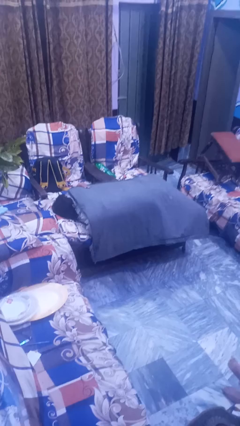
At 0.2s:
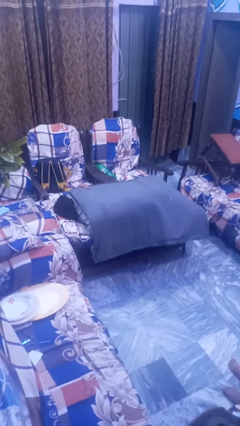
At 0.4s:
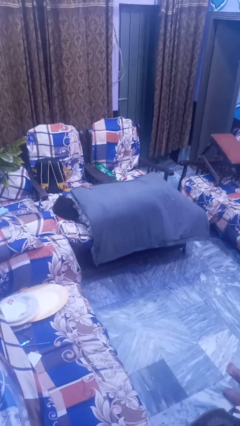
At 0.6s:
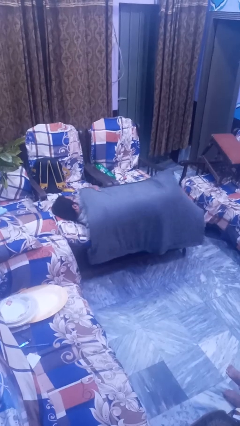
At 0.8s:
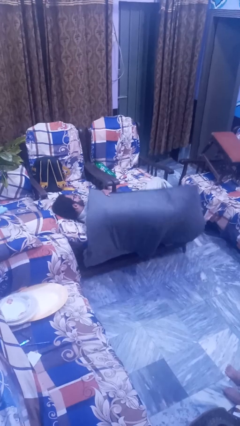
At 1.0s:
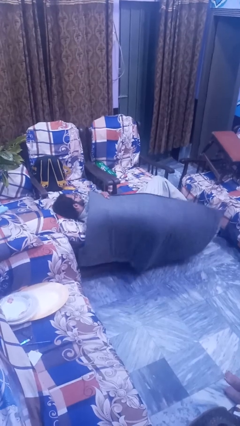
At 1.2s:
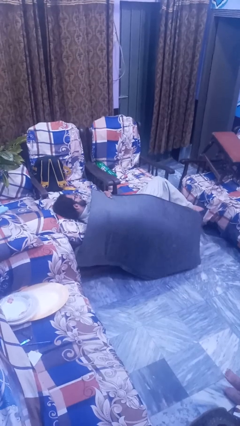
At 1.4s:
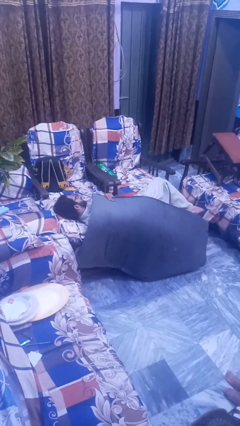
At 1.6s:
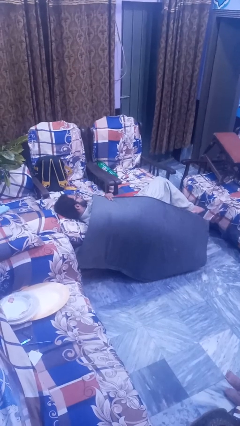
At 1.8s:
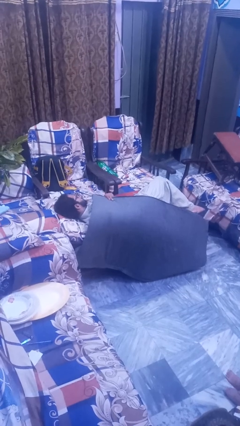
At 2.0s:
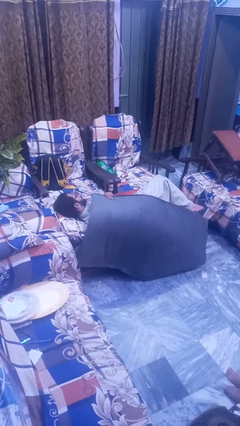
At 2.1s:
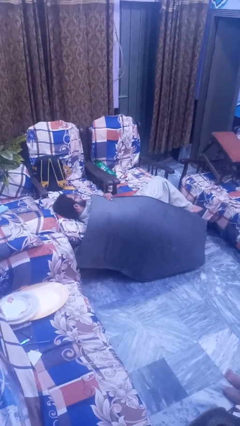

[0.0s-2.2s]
person uncovers with blanket

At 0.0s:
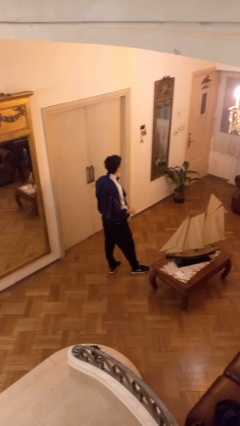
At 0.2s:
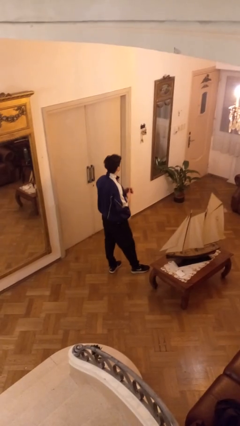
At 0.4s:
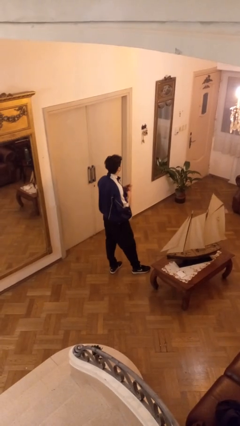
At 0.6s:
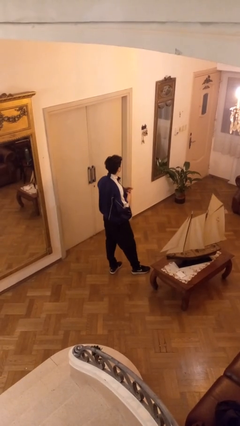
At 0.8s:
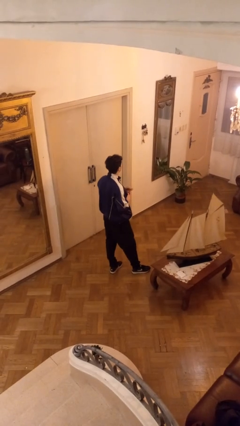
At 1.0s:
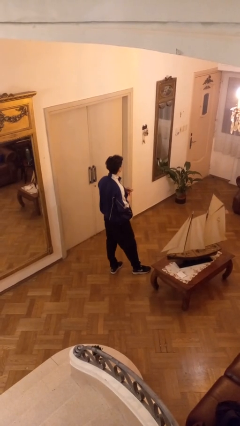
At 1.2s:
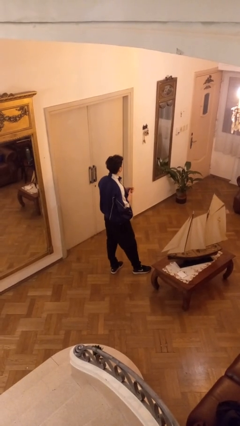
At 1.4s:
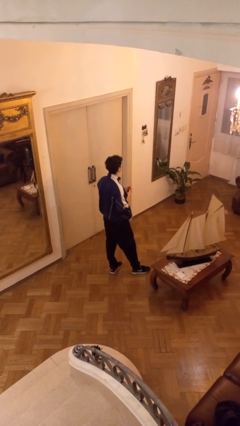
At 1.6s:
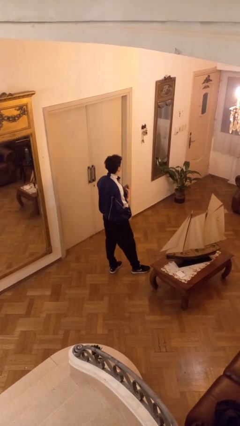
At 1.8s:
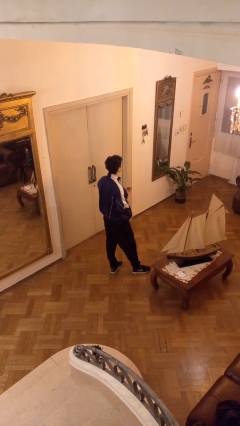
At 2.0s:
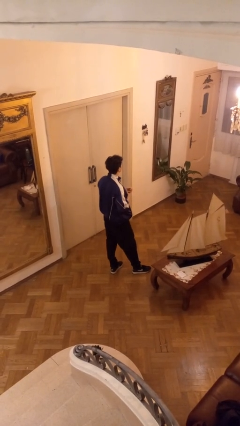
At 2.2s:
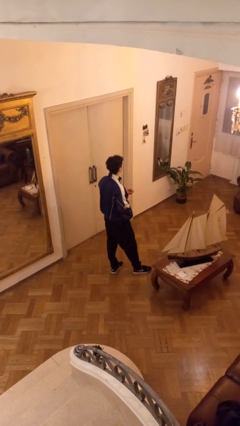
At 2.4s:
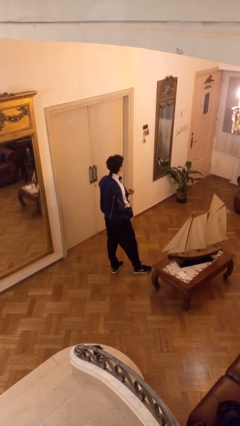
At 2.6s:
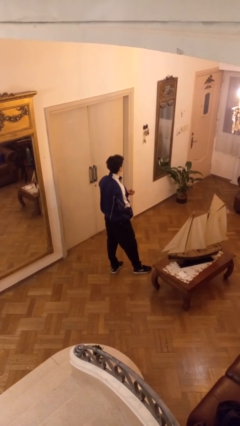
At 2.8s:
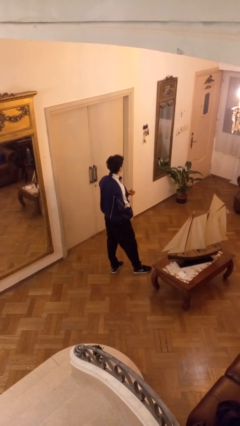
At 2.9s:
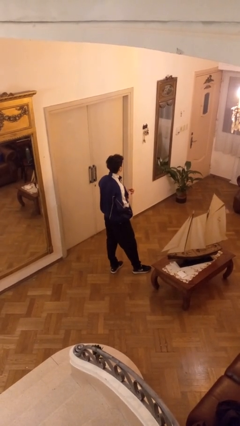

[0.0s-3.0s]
person cracks knuckles

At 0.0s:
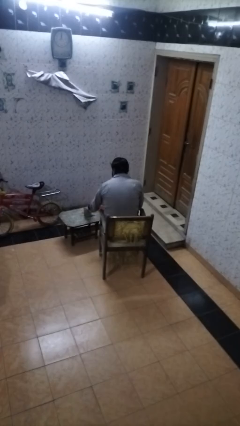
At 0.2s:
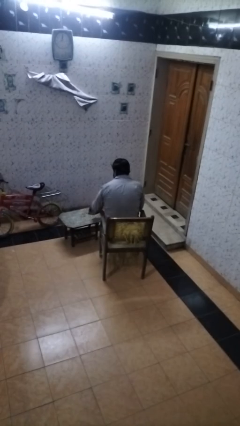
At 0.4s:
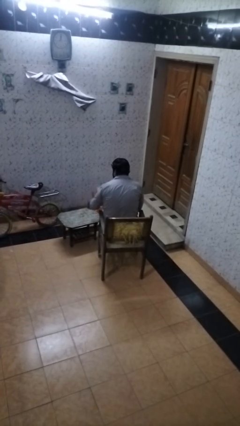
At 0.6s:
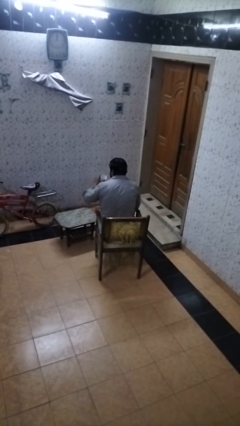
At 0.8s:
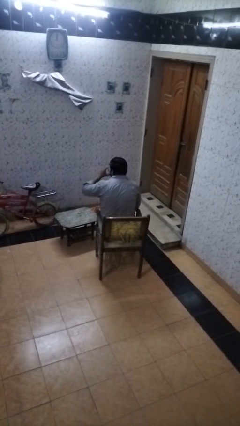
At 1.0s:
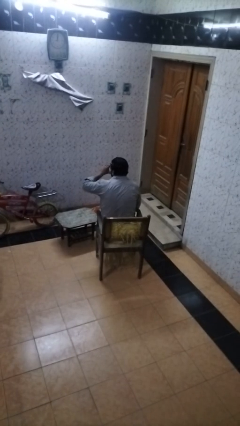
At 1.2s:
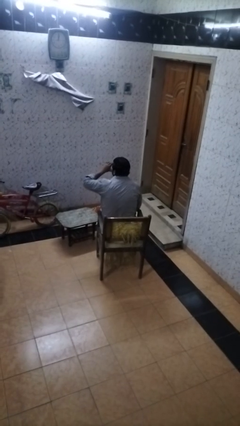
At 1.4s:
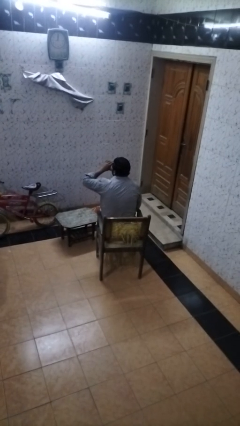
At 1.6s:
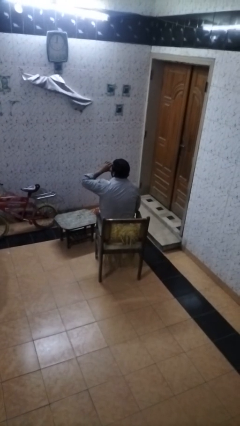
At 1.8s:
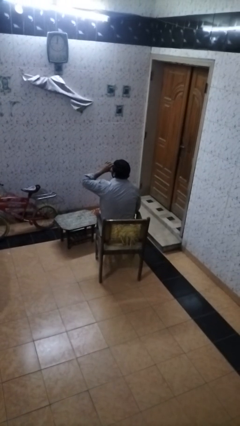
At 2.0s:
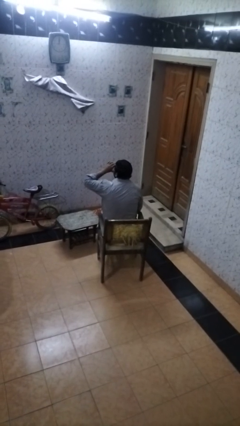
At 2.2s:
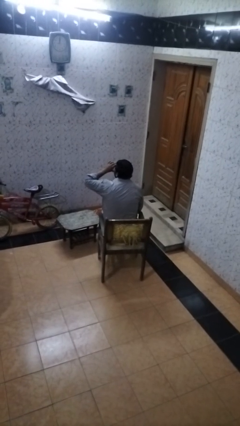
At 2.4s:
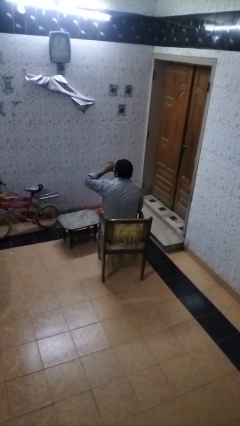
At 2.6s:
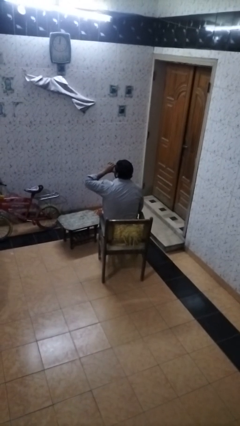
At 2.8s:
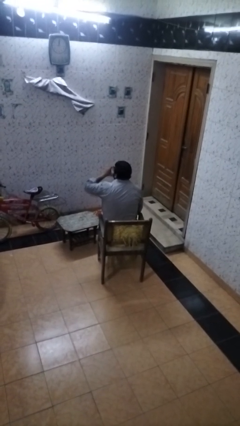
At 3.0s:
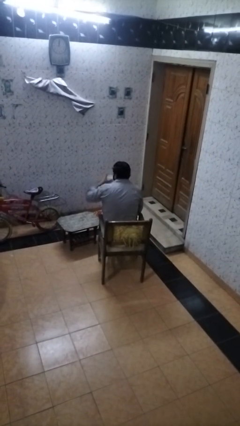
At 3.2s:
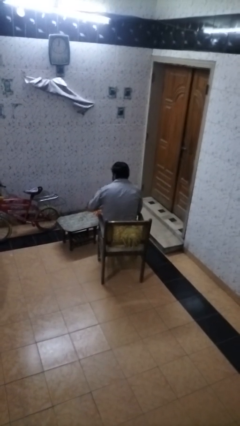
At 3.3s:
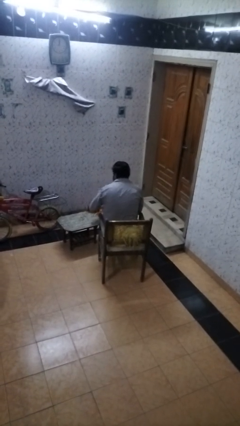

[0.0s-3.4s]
person drinks from cup

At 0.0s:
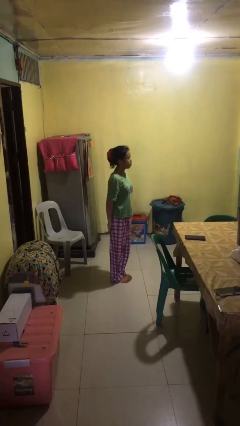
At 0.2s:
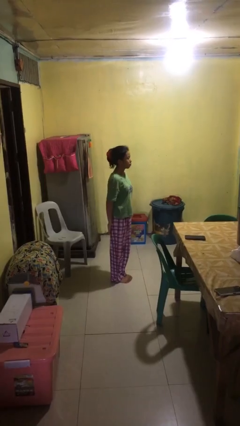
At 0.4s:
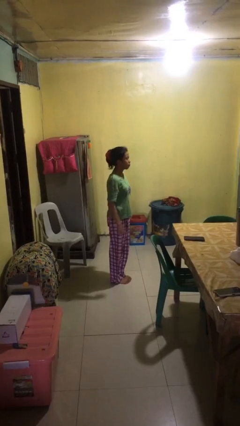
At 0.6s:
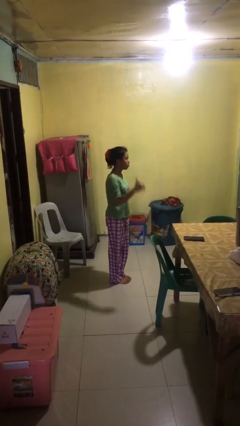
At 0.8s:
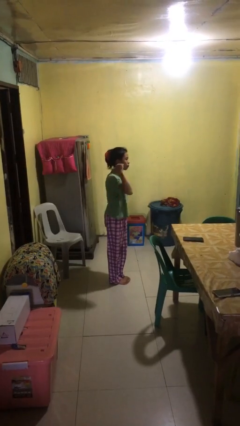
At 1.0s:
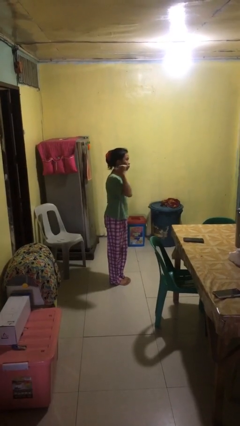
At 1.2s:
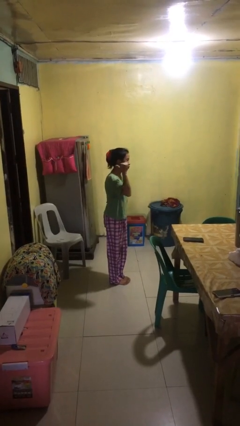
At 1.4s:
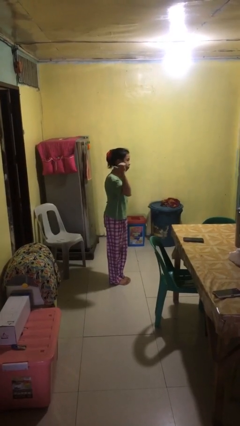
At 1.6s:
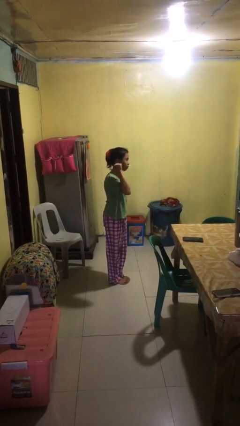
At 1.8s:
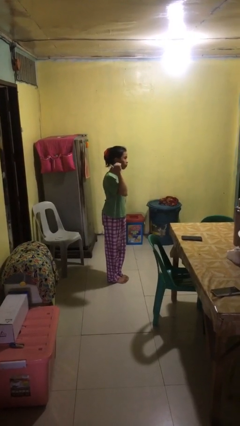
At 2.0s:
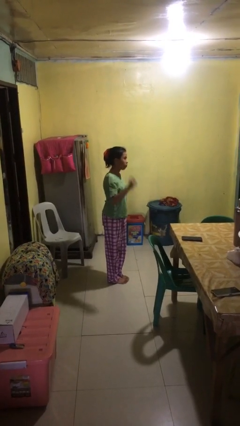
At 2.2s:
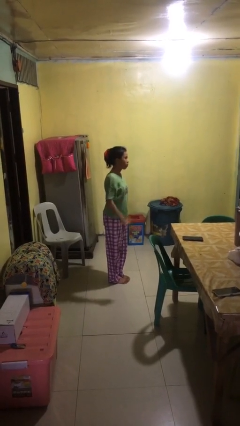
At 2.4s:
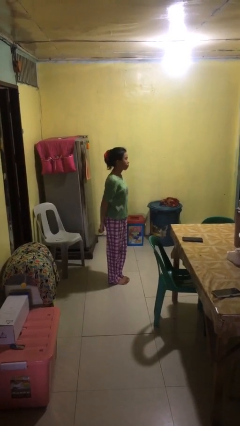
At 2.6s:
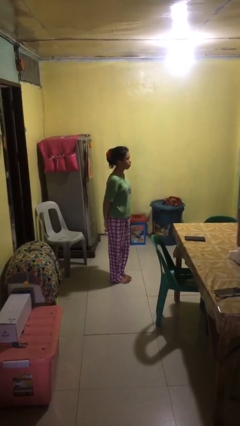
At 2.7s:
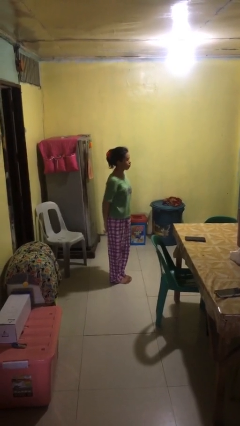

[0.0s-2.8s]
person gestures behind me

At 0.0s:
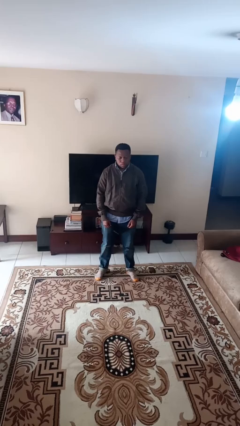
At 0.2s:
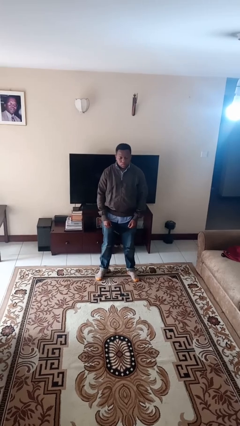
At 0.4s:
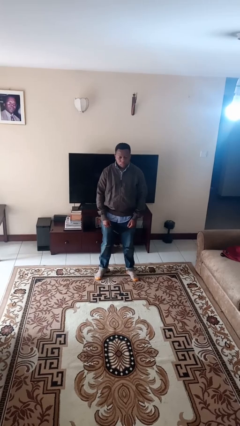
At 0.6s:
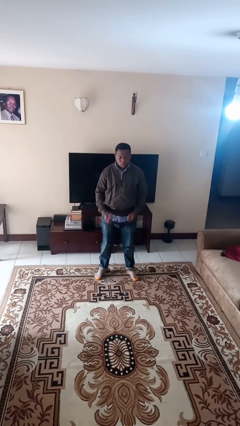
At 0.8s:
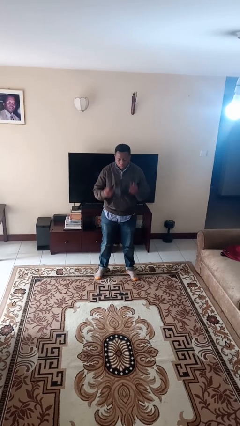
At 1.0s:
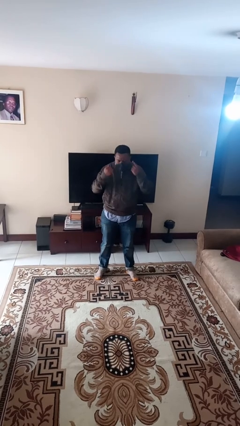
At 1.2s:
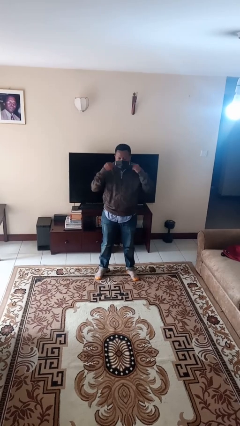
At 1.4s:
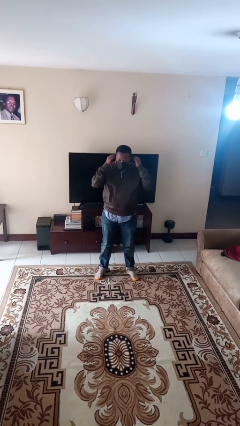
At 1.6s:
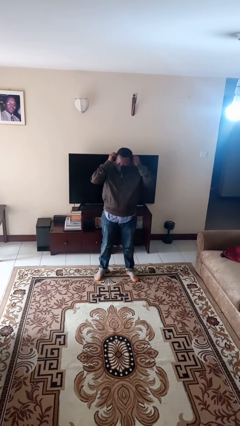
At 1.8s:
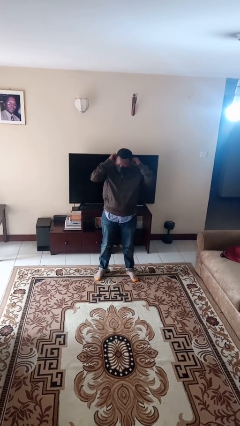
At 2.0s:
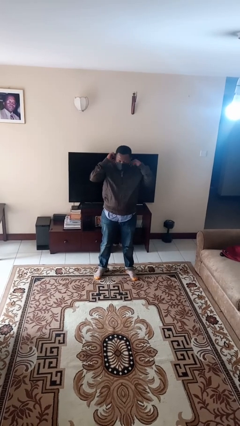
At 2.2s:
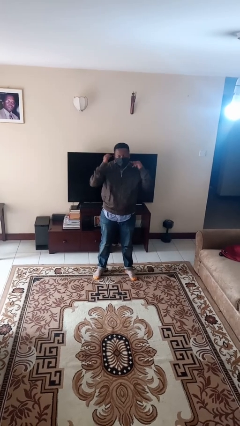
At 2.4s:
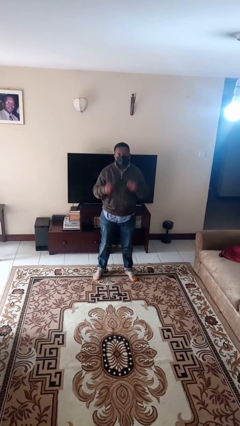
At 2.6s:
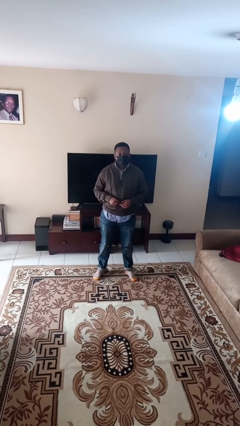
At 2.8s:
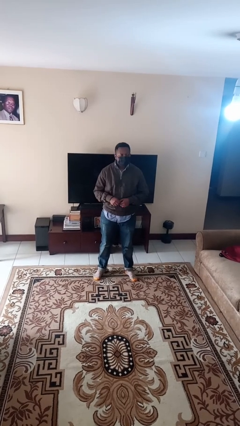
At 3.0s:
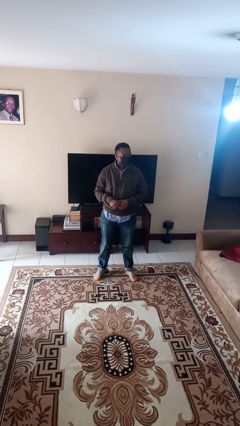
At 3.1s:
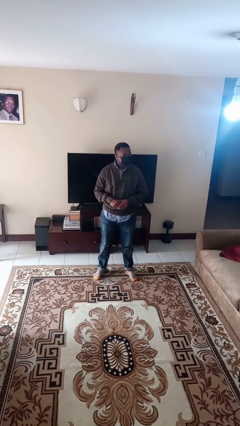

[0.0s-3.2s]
person puts on facemask

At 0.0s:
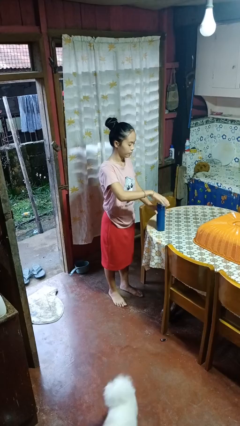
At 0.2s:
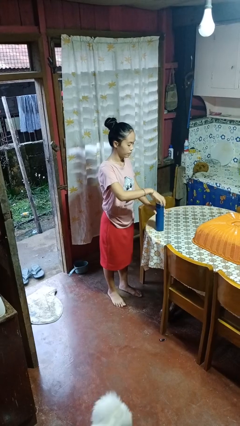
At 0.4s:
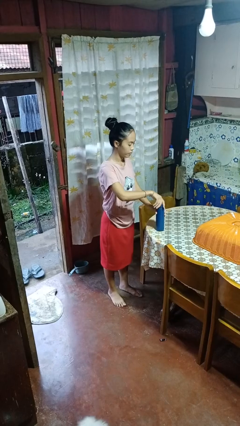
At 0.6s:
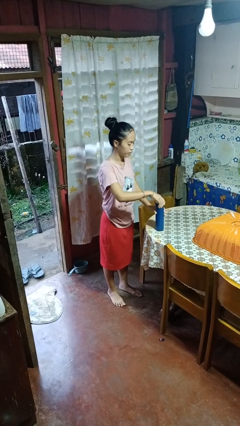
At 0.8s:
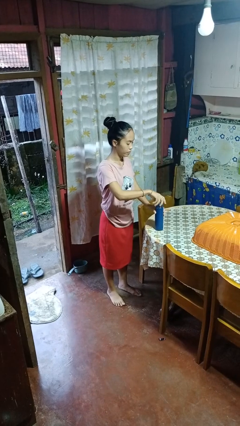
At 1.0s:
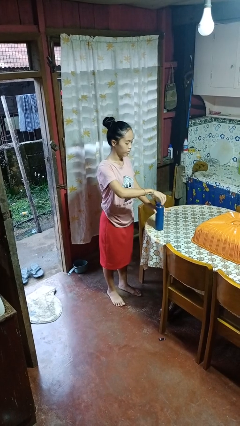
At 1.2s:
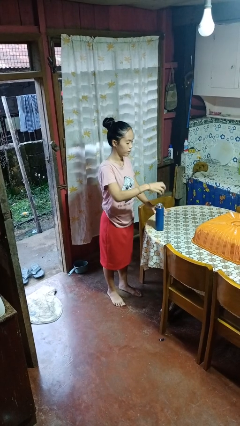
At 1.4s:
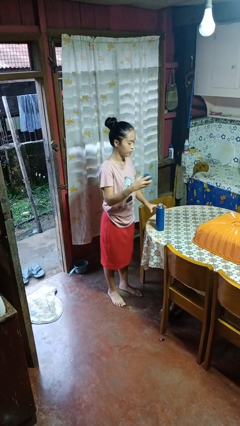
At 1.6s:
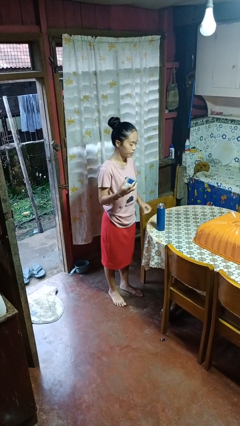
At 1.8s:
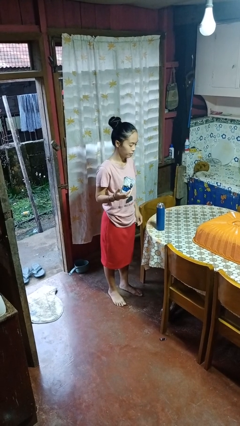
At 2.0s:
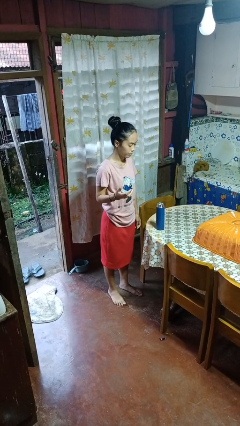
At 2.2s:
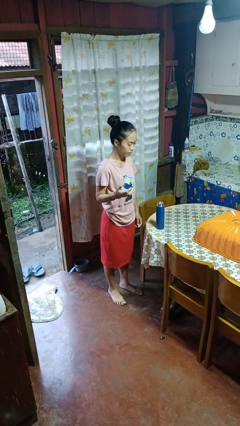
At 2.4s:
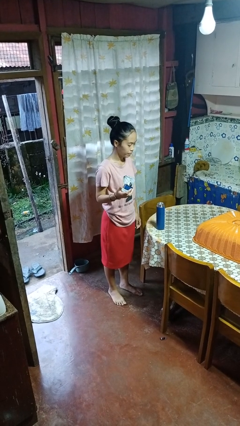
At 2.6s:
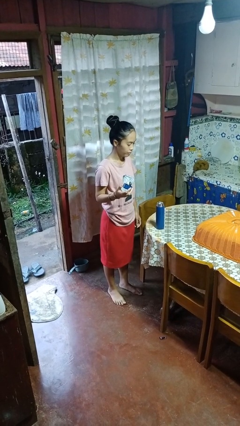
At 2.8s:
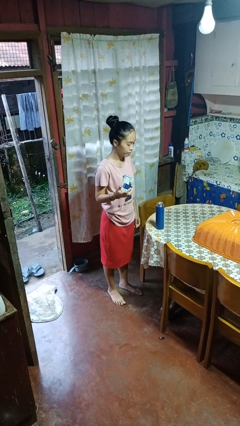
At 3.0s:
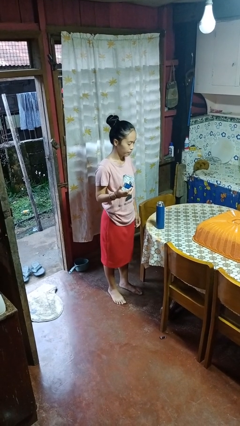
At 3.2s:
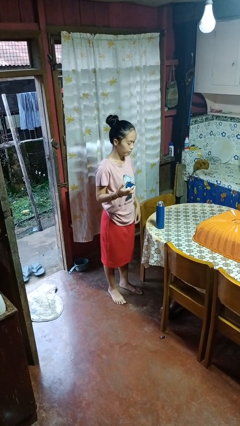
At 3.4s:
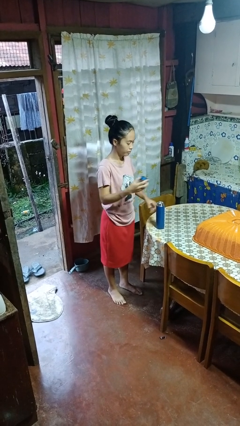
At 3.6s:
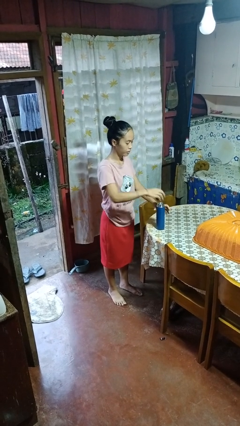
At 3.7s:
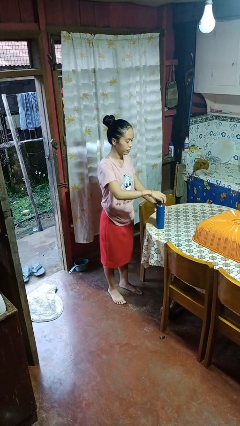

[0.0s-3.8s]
person opens jar
